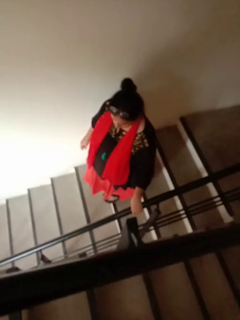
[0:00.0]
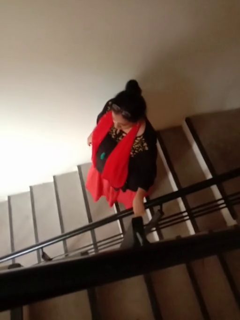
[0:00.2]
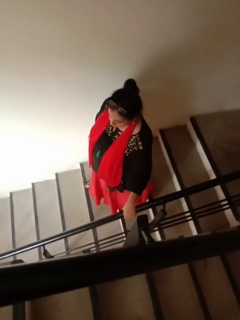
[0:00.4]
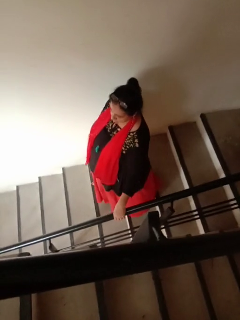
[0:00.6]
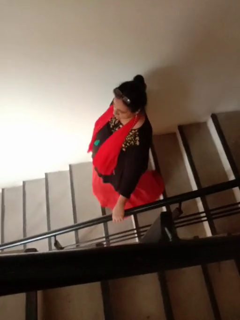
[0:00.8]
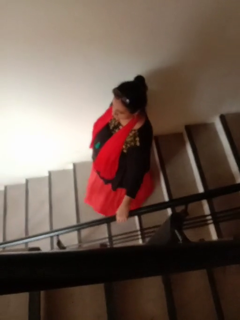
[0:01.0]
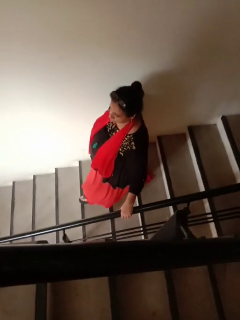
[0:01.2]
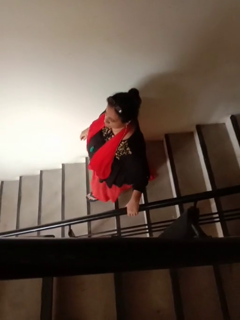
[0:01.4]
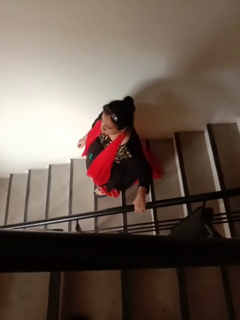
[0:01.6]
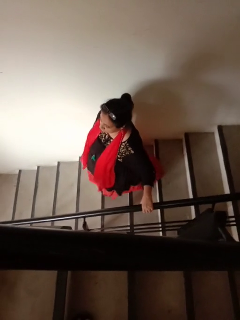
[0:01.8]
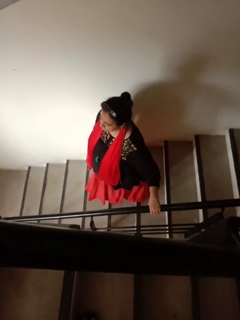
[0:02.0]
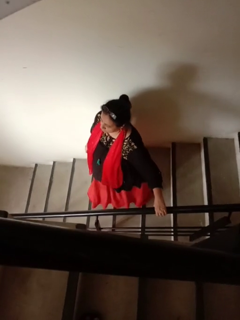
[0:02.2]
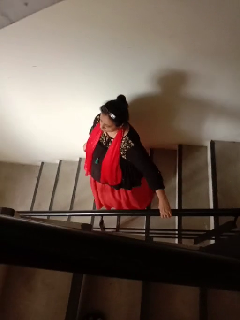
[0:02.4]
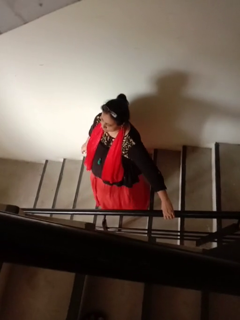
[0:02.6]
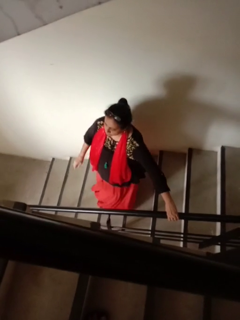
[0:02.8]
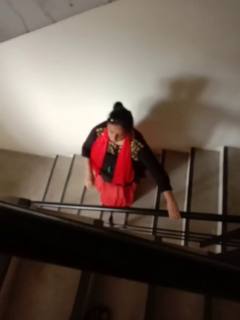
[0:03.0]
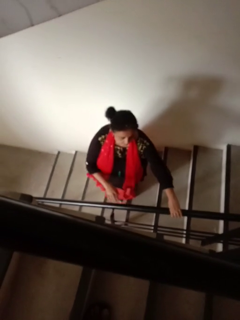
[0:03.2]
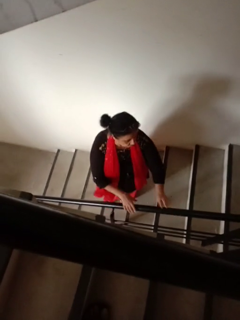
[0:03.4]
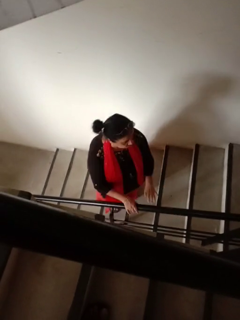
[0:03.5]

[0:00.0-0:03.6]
person climbs down stairs

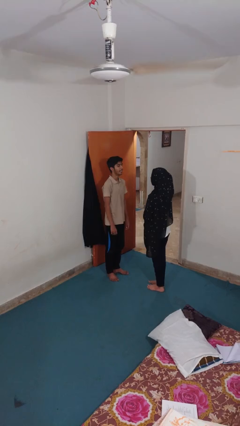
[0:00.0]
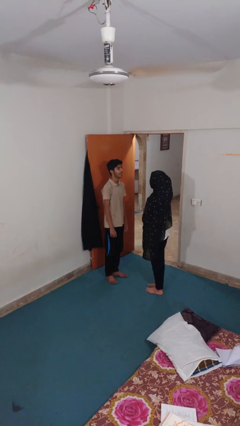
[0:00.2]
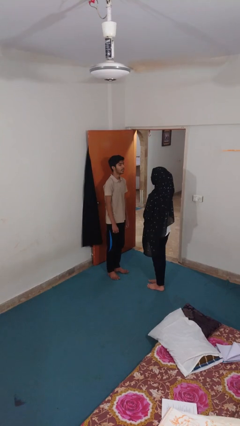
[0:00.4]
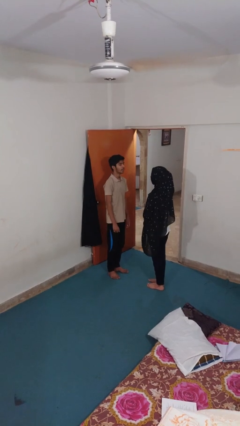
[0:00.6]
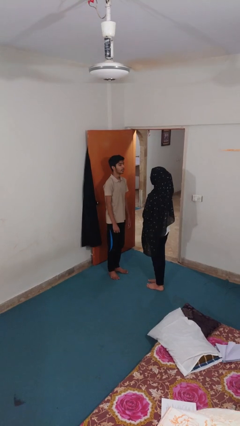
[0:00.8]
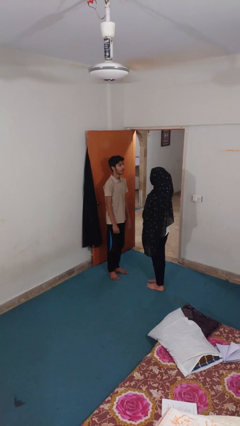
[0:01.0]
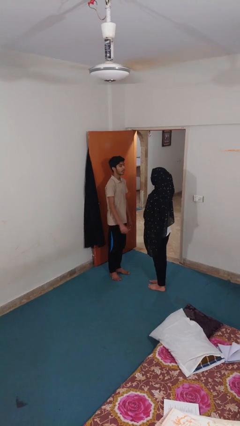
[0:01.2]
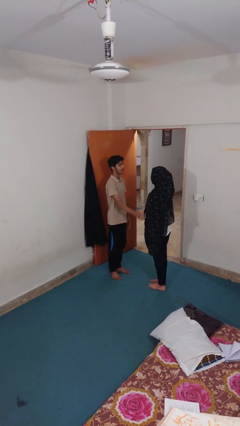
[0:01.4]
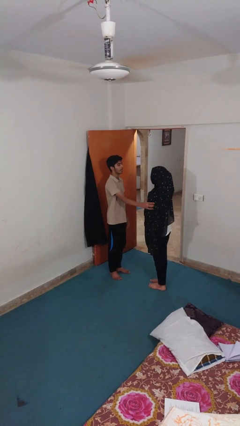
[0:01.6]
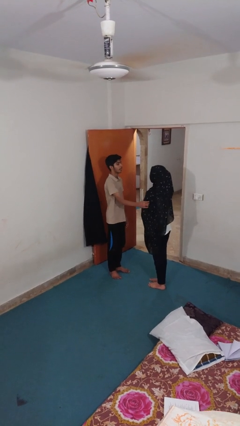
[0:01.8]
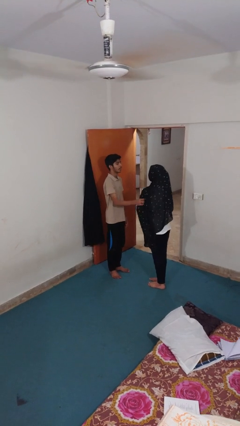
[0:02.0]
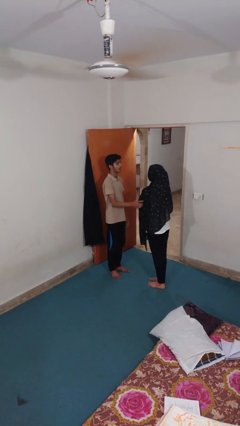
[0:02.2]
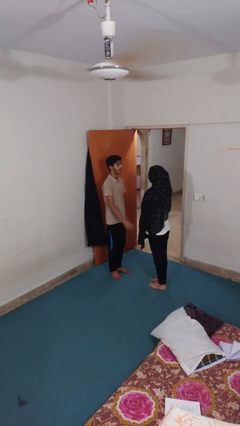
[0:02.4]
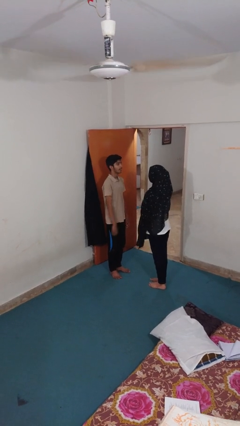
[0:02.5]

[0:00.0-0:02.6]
person grabs person by bicep

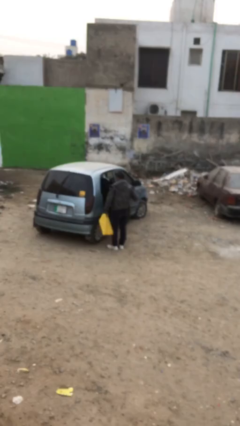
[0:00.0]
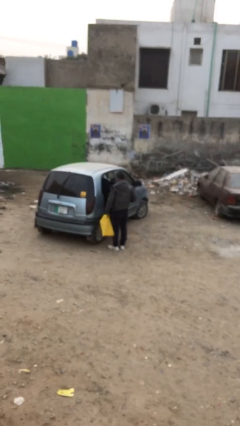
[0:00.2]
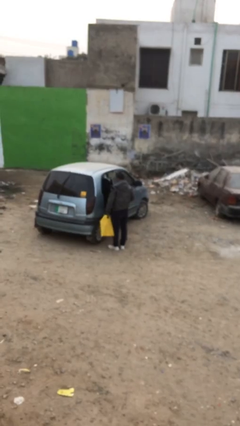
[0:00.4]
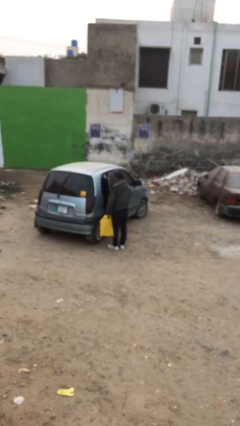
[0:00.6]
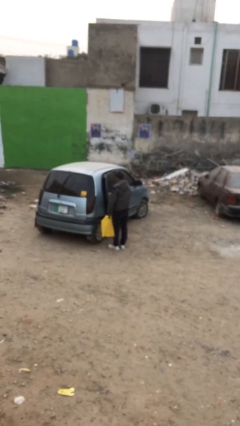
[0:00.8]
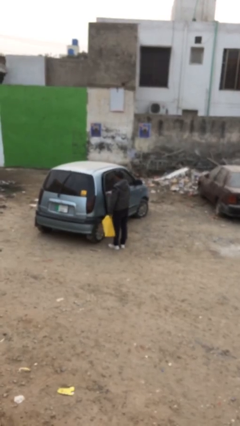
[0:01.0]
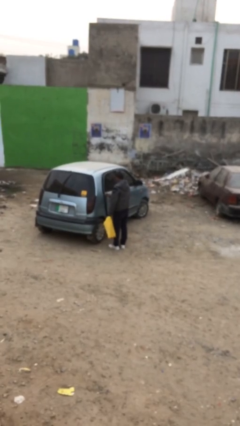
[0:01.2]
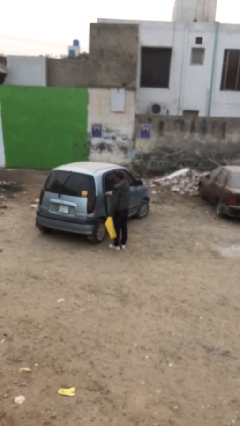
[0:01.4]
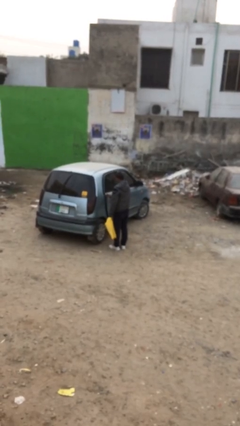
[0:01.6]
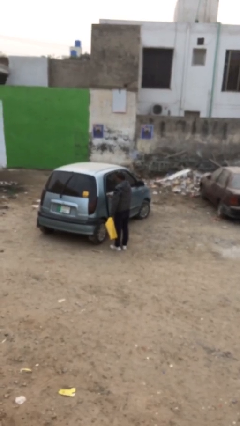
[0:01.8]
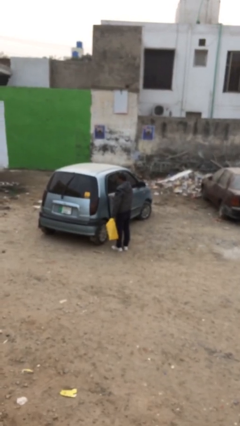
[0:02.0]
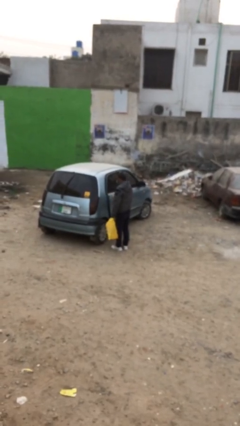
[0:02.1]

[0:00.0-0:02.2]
person closes car door

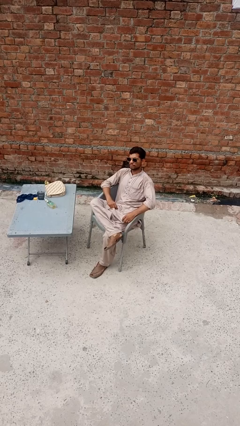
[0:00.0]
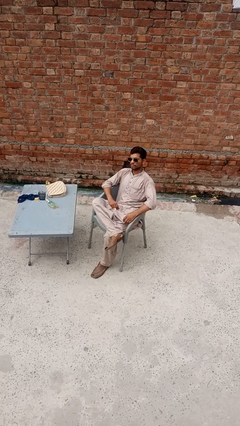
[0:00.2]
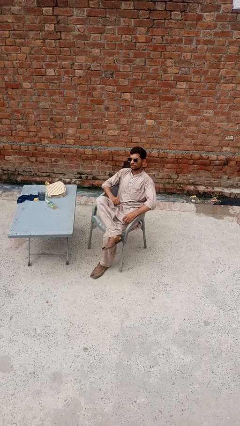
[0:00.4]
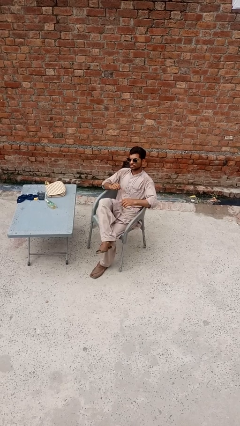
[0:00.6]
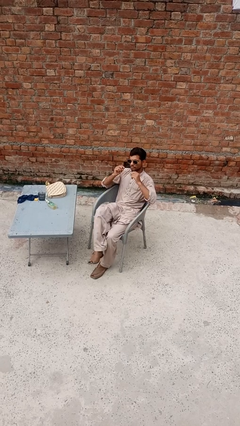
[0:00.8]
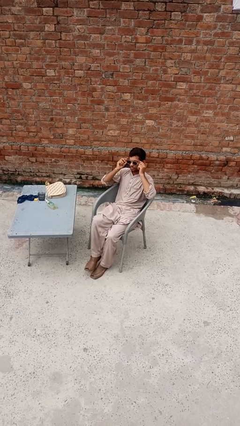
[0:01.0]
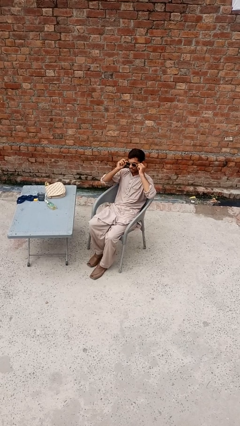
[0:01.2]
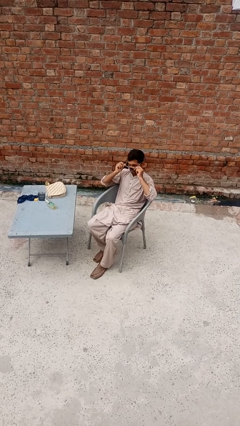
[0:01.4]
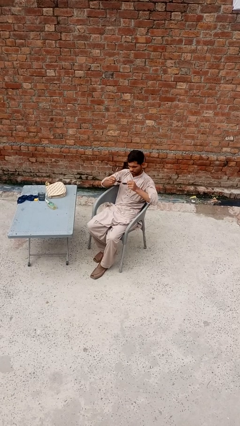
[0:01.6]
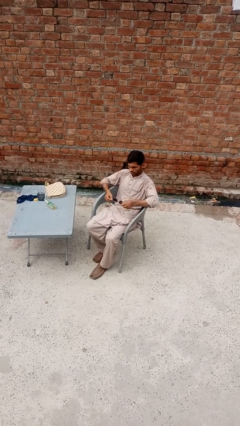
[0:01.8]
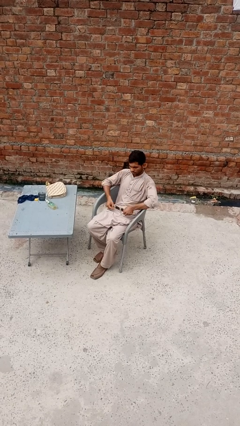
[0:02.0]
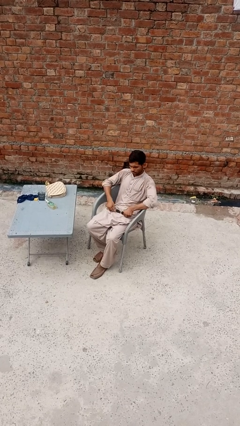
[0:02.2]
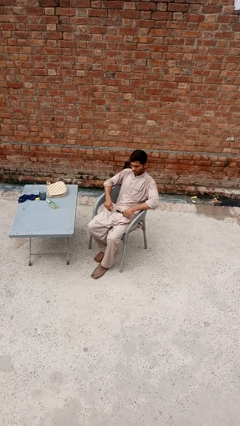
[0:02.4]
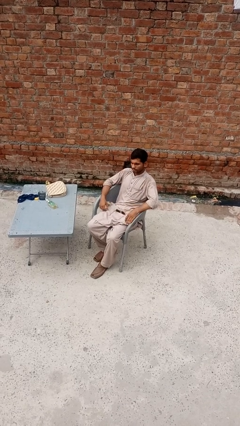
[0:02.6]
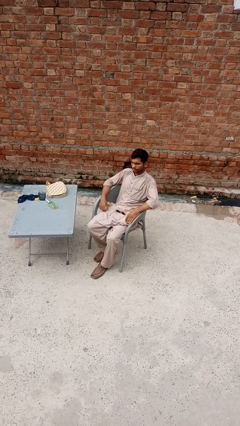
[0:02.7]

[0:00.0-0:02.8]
person takes off sunglasses

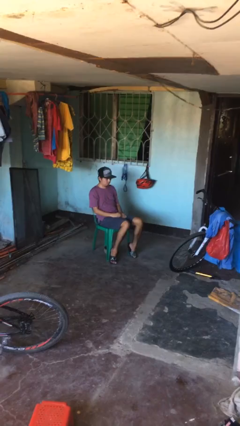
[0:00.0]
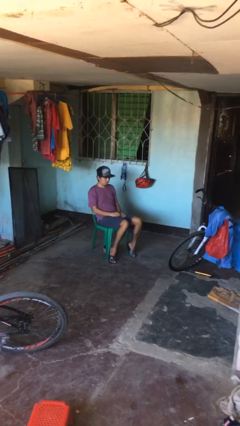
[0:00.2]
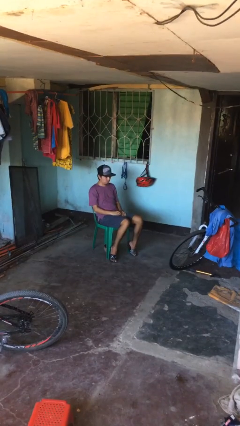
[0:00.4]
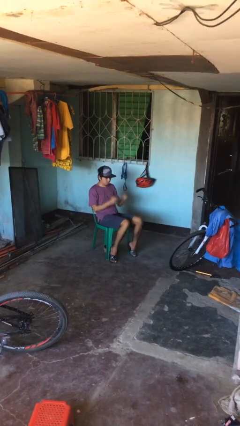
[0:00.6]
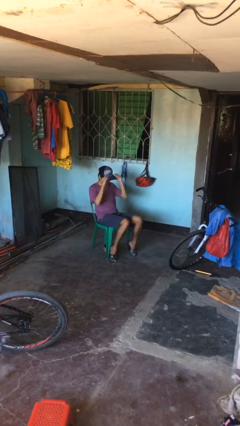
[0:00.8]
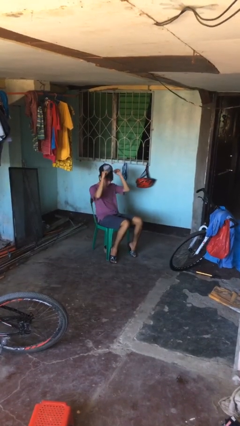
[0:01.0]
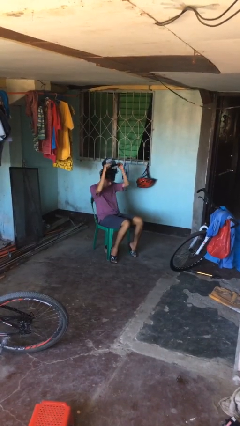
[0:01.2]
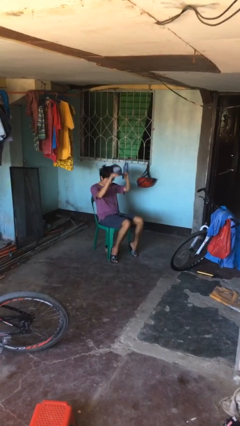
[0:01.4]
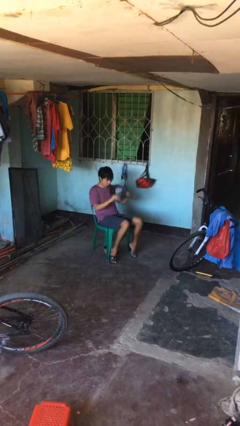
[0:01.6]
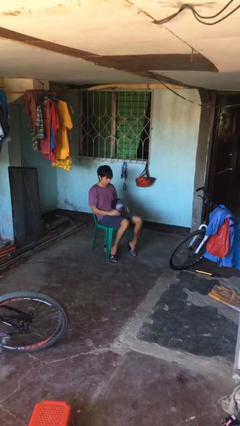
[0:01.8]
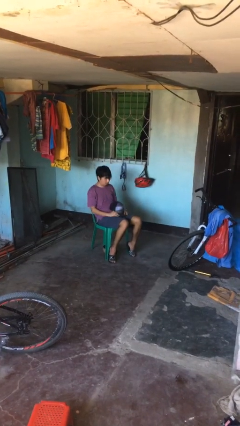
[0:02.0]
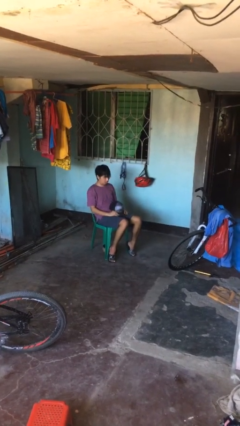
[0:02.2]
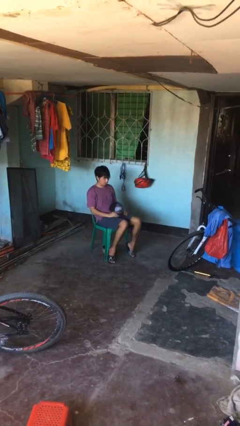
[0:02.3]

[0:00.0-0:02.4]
person takes off hat

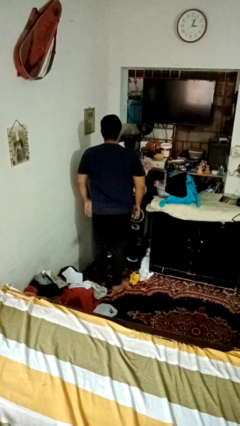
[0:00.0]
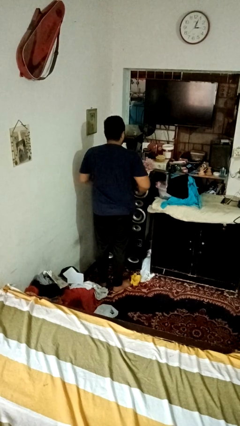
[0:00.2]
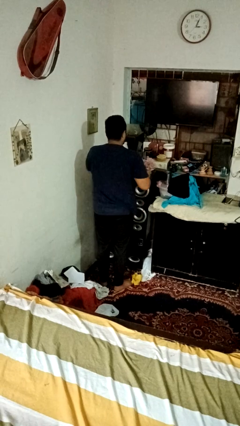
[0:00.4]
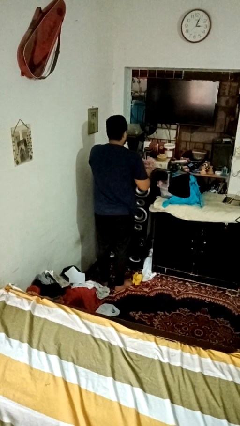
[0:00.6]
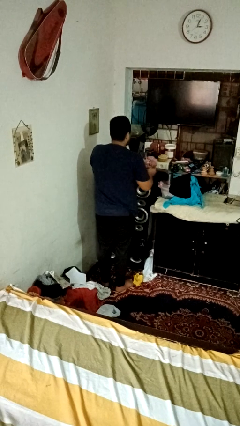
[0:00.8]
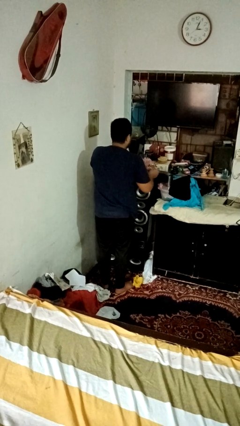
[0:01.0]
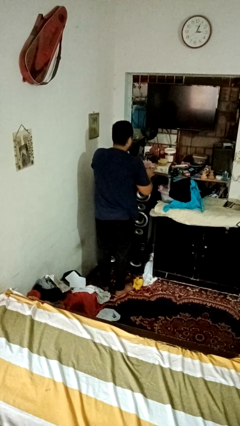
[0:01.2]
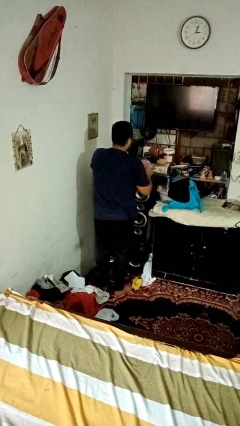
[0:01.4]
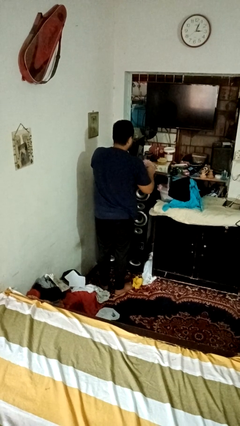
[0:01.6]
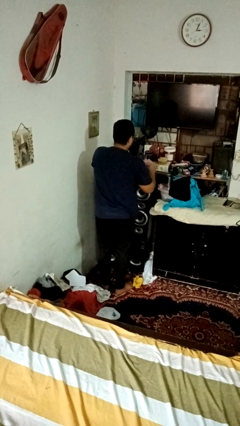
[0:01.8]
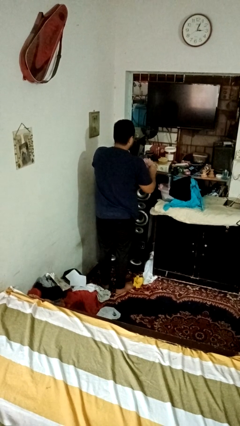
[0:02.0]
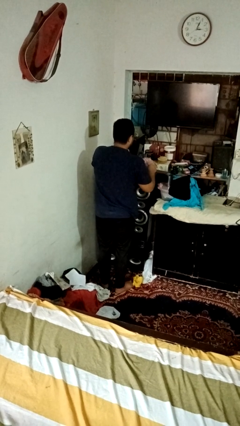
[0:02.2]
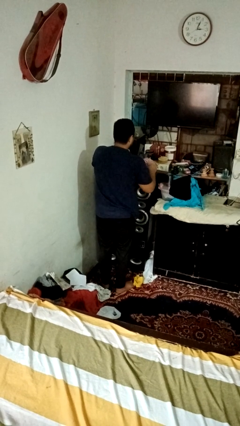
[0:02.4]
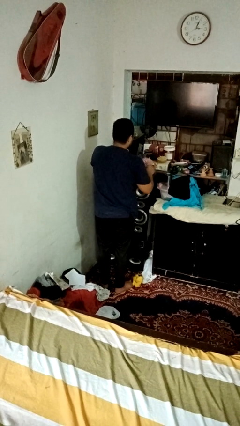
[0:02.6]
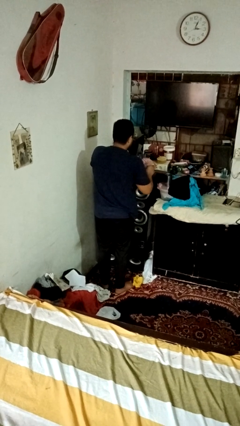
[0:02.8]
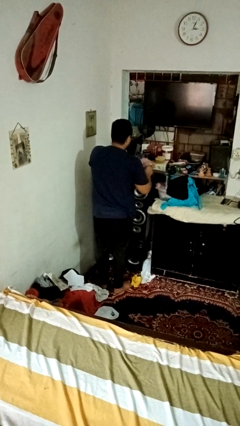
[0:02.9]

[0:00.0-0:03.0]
person arranges flowers in vase

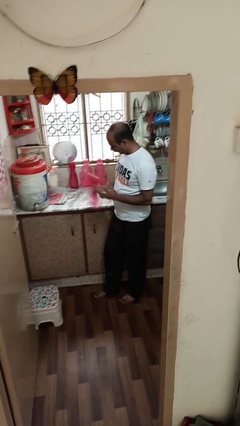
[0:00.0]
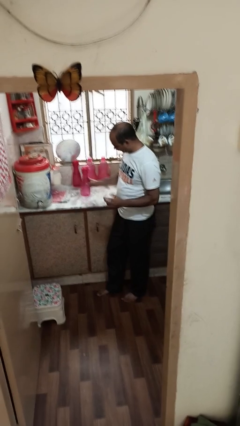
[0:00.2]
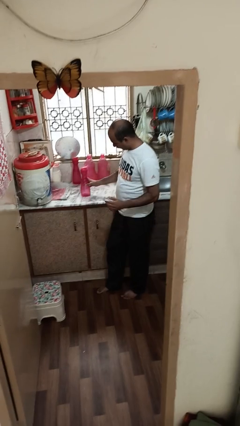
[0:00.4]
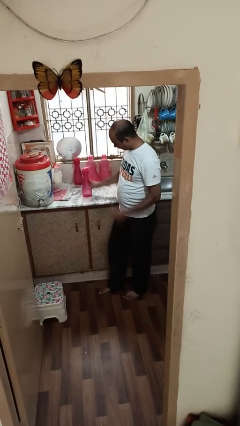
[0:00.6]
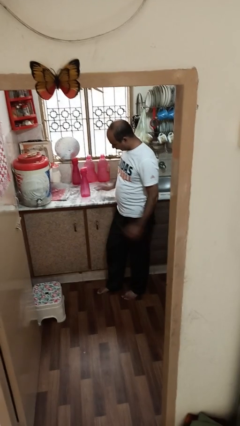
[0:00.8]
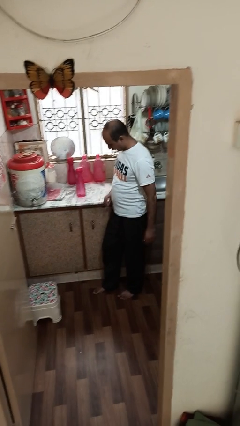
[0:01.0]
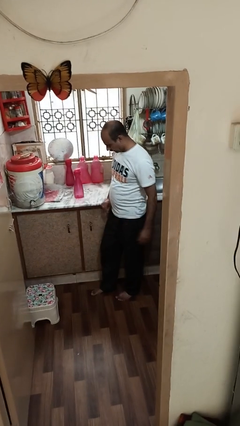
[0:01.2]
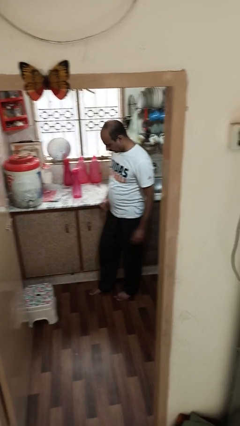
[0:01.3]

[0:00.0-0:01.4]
person puts down object on countertop

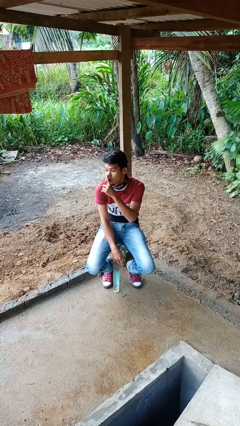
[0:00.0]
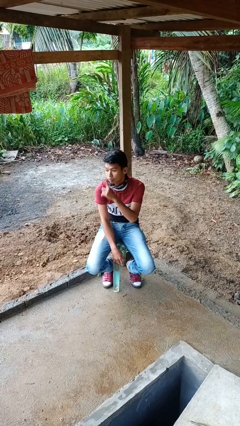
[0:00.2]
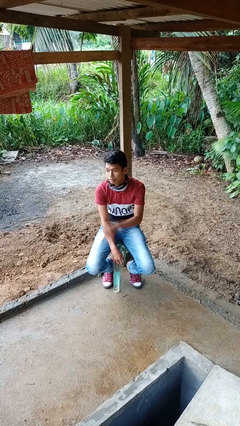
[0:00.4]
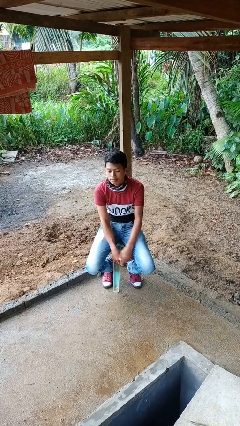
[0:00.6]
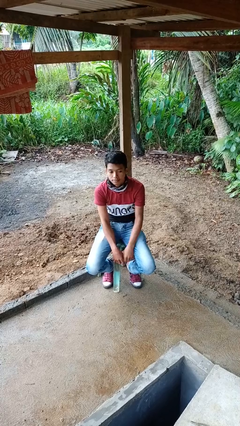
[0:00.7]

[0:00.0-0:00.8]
person gestures be quiet
